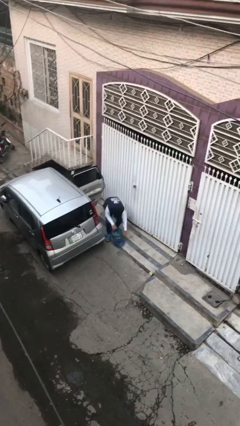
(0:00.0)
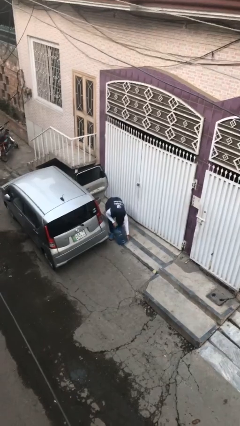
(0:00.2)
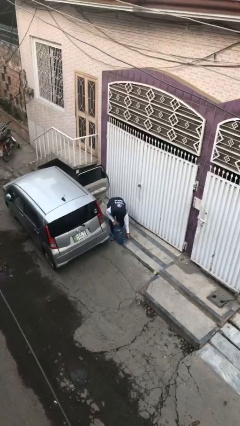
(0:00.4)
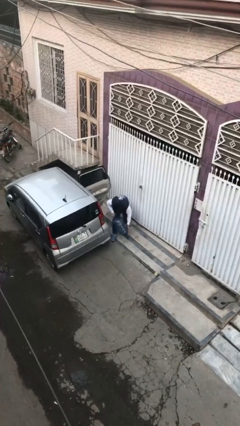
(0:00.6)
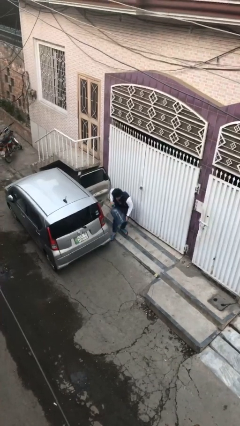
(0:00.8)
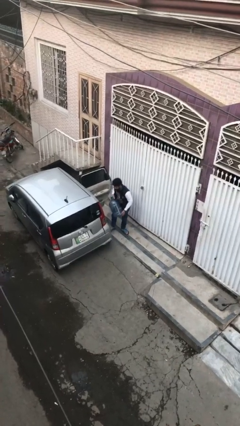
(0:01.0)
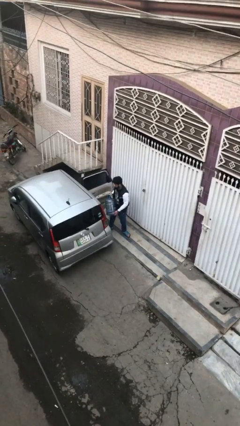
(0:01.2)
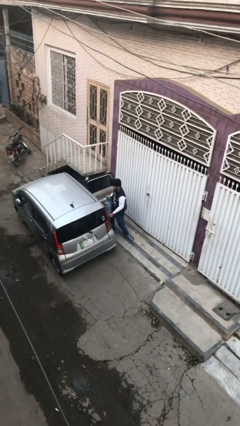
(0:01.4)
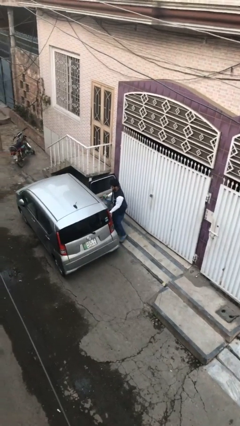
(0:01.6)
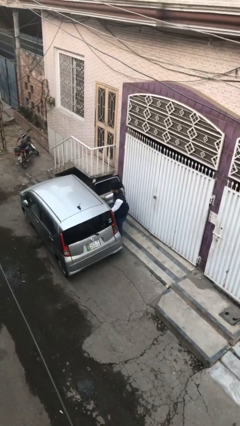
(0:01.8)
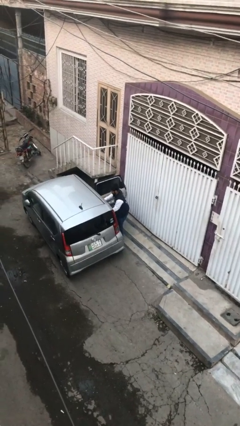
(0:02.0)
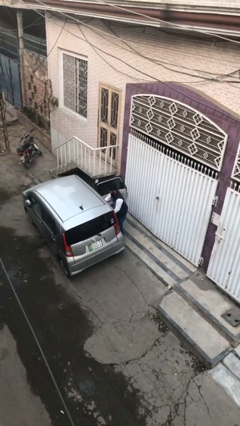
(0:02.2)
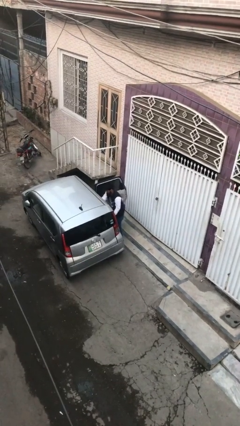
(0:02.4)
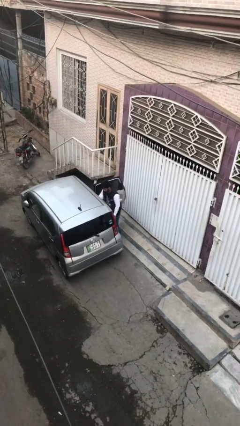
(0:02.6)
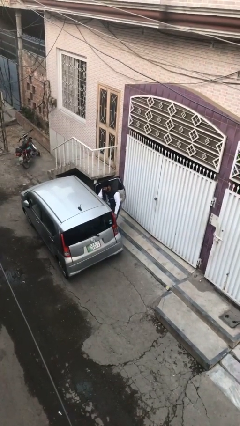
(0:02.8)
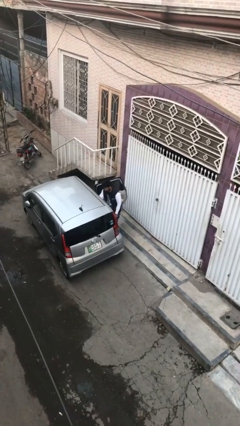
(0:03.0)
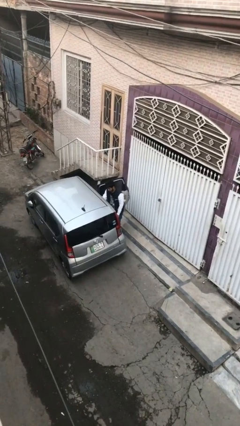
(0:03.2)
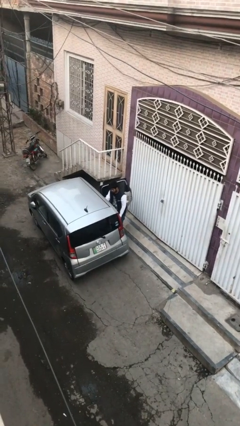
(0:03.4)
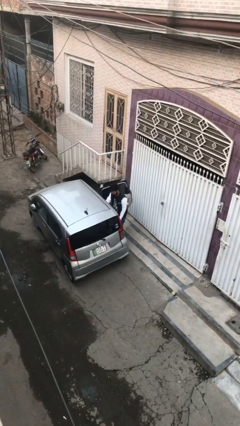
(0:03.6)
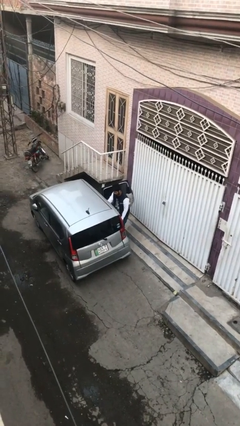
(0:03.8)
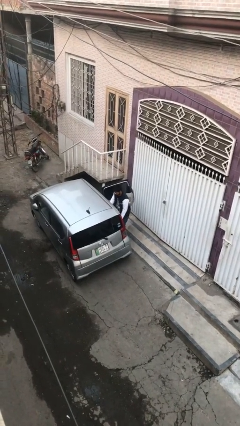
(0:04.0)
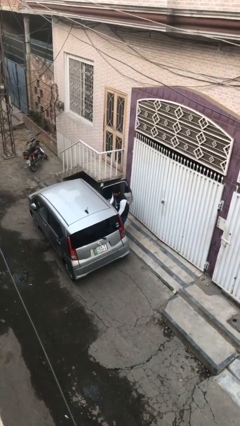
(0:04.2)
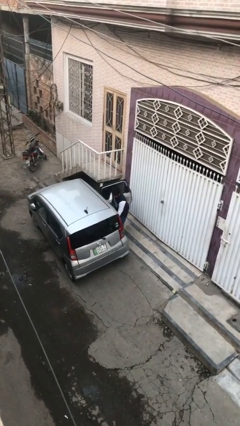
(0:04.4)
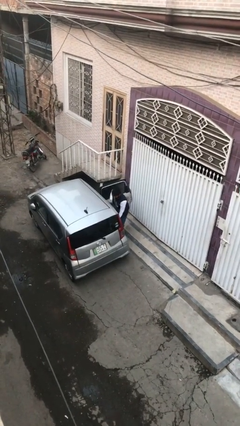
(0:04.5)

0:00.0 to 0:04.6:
person loads car

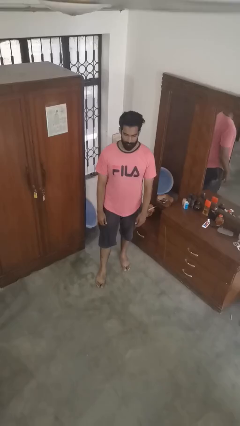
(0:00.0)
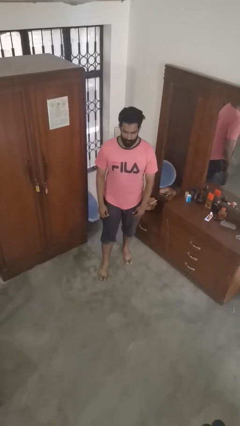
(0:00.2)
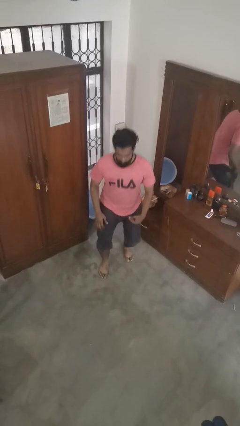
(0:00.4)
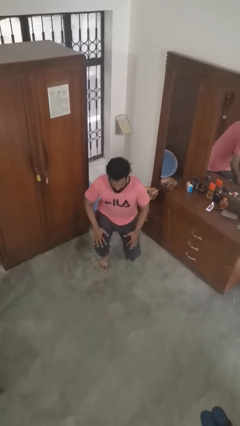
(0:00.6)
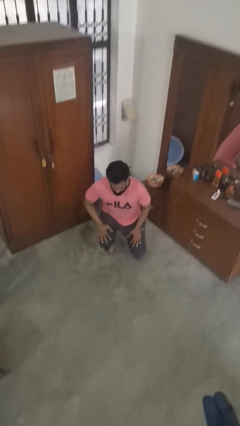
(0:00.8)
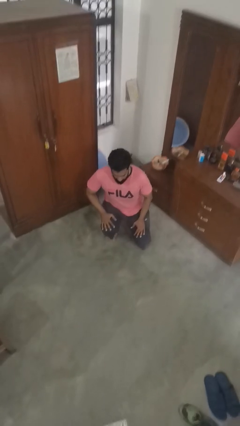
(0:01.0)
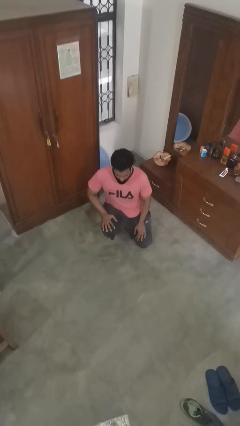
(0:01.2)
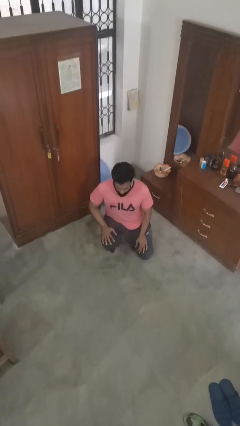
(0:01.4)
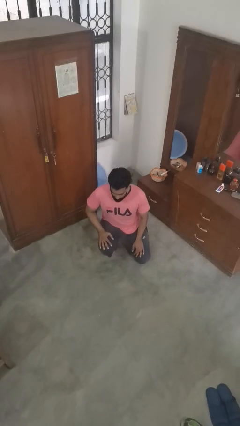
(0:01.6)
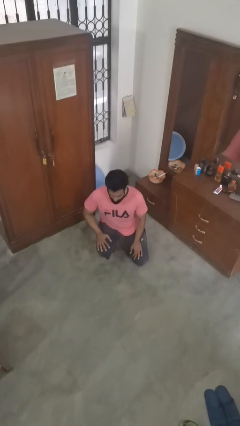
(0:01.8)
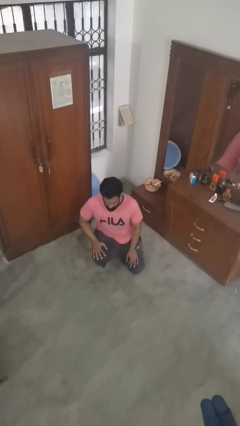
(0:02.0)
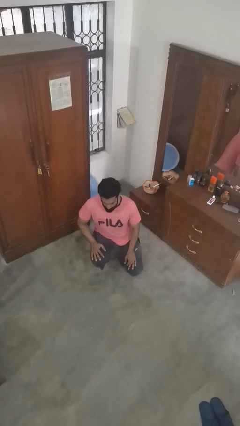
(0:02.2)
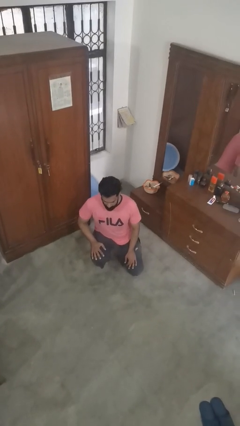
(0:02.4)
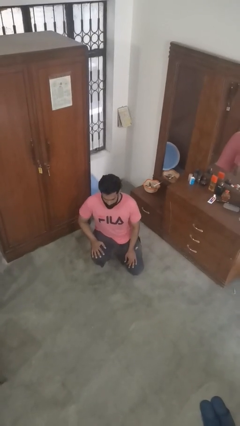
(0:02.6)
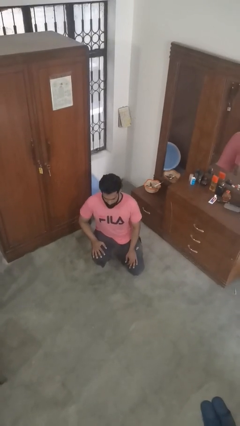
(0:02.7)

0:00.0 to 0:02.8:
person kneels

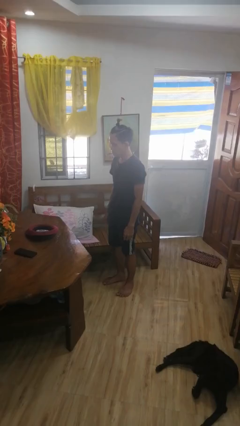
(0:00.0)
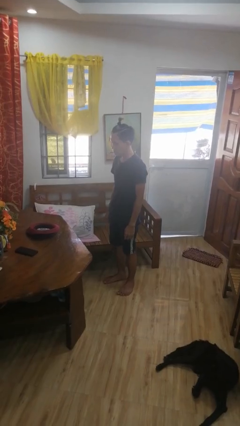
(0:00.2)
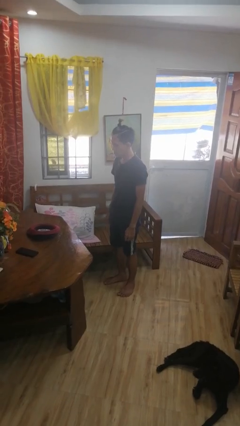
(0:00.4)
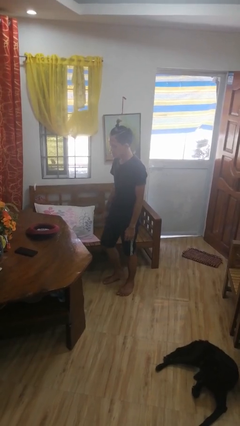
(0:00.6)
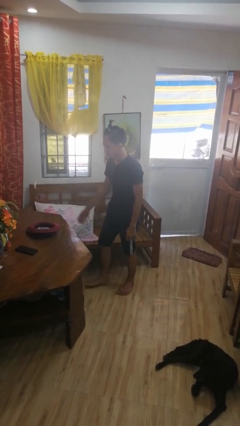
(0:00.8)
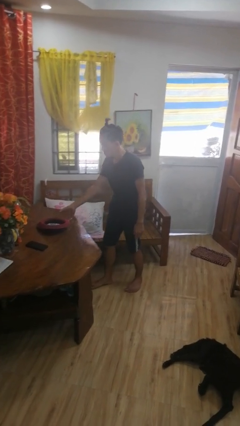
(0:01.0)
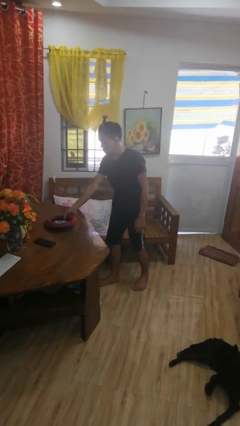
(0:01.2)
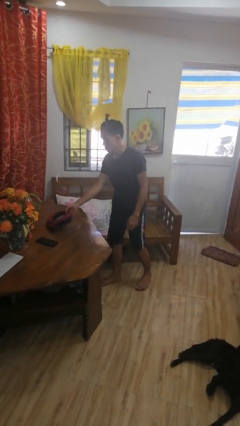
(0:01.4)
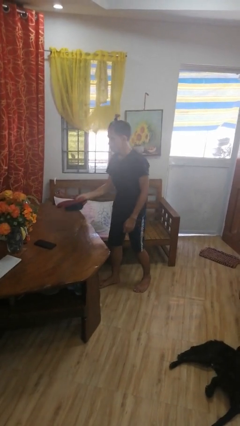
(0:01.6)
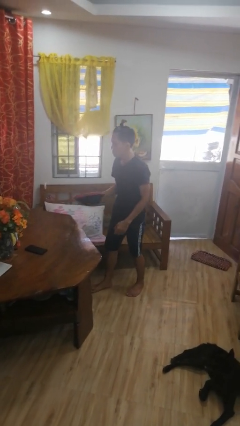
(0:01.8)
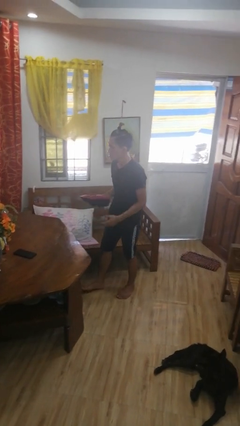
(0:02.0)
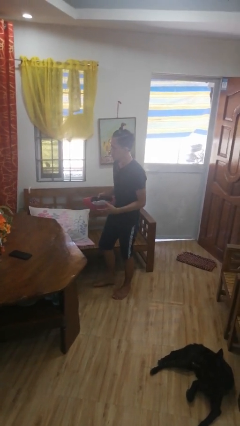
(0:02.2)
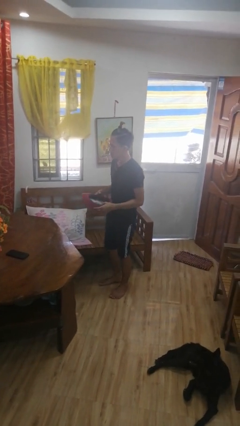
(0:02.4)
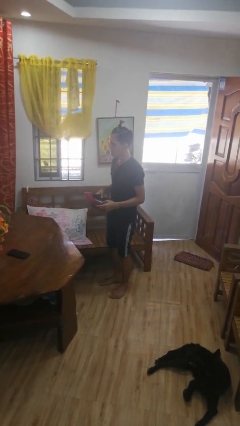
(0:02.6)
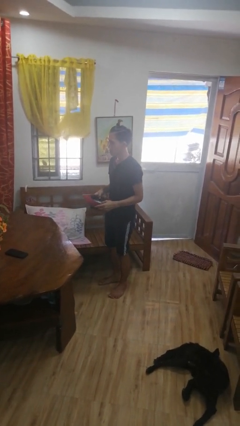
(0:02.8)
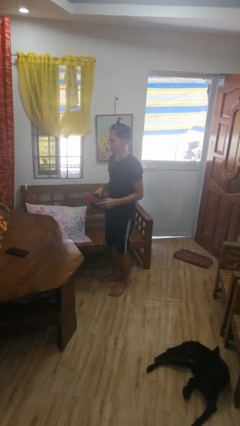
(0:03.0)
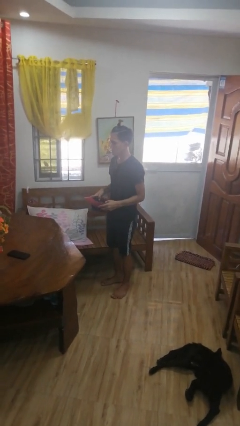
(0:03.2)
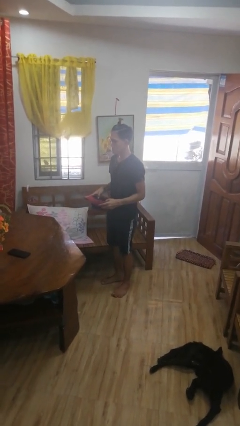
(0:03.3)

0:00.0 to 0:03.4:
person picks up object from table

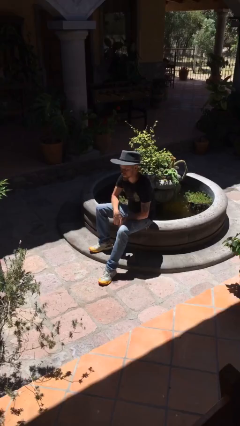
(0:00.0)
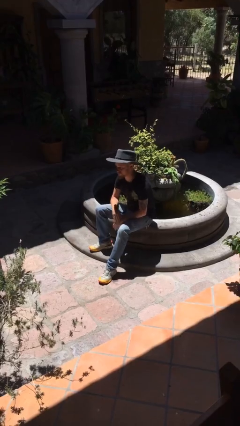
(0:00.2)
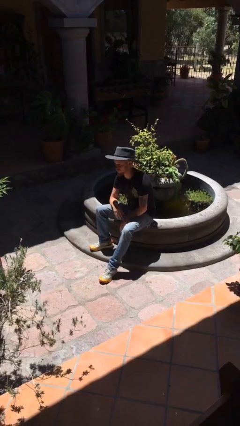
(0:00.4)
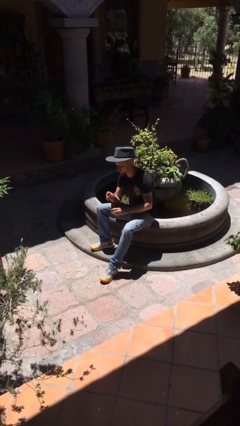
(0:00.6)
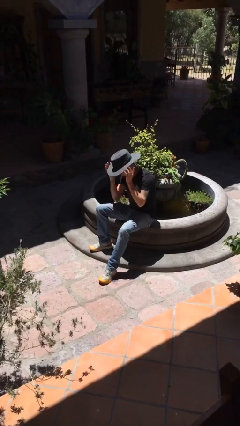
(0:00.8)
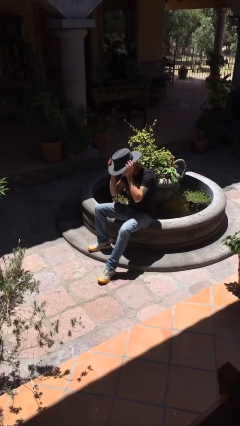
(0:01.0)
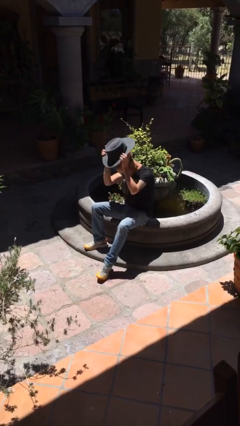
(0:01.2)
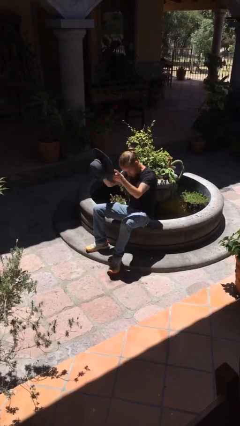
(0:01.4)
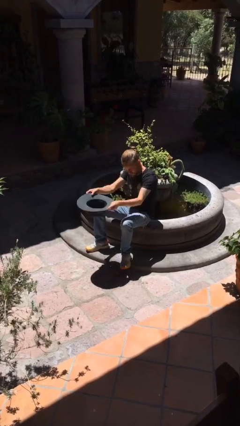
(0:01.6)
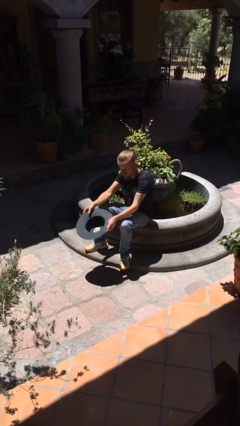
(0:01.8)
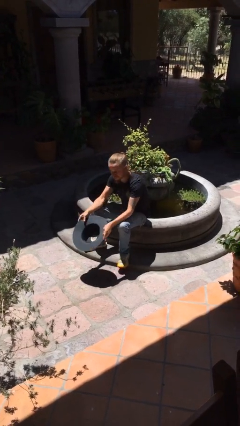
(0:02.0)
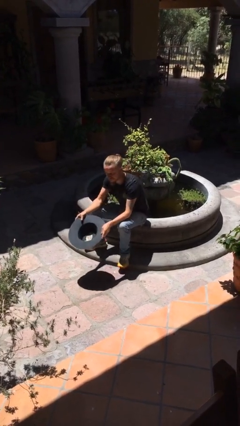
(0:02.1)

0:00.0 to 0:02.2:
person takes off hat

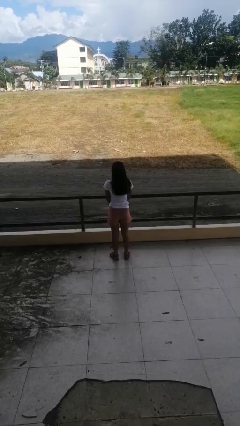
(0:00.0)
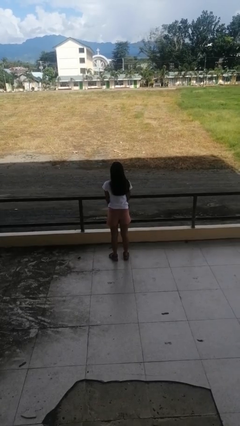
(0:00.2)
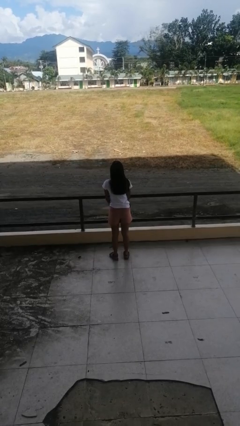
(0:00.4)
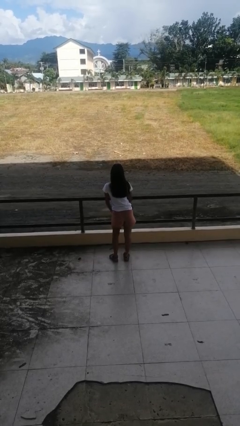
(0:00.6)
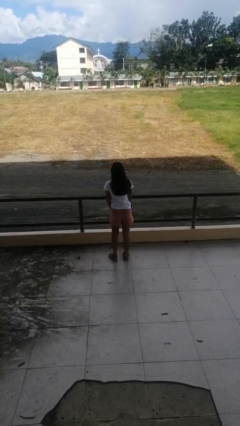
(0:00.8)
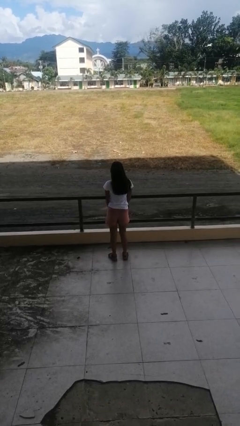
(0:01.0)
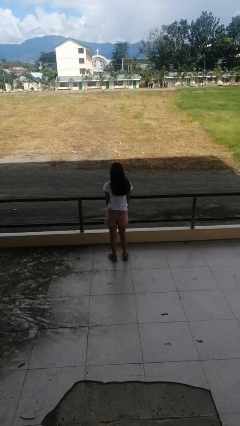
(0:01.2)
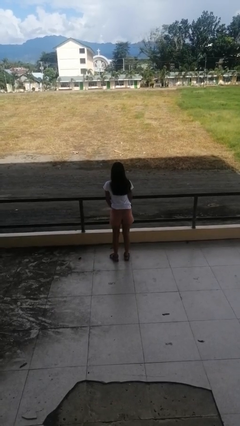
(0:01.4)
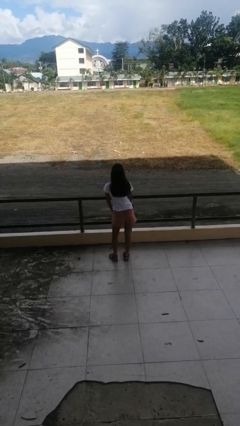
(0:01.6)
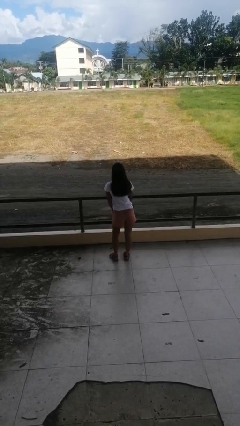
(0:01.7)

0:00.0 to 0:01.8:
person wiggles hips

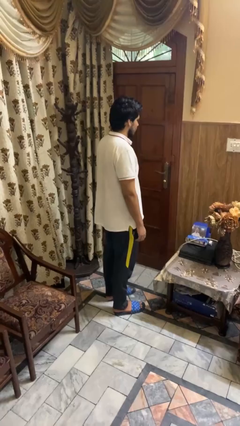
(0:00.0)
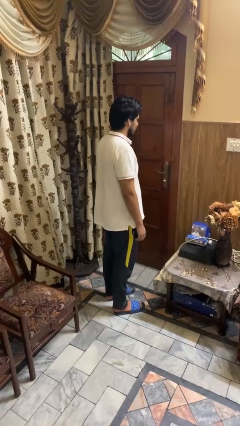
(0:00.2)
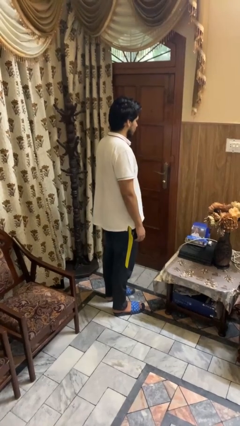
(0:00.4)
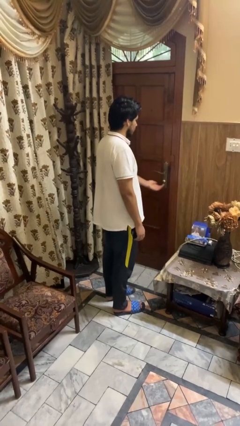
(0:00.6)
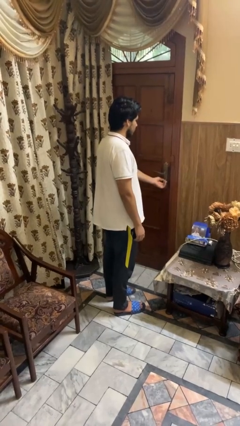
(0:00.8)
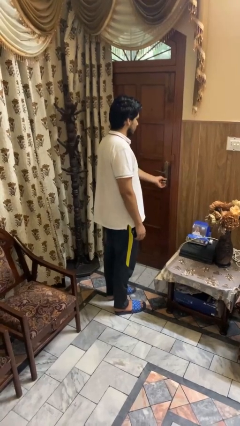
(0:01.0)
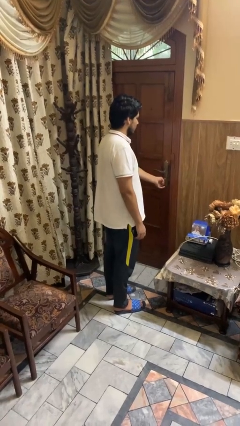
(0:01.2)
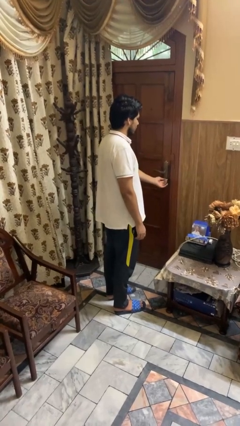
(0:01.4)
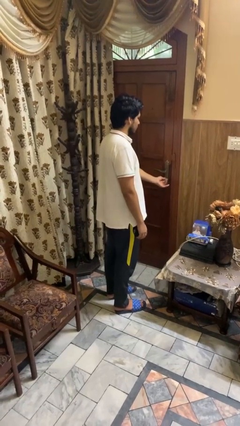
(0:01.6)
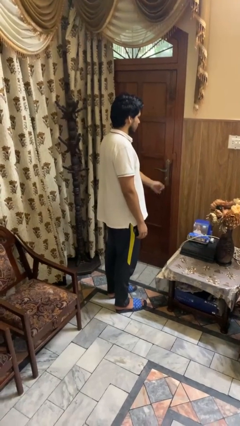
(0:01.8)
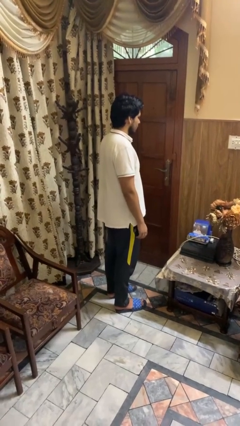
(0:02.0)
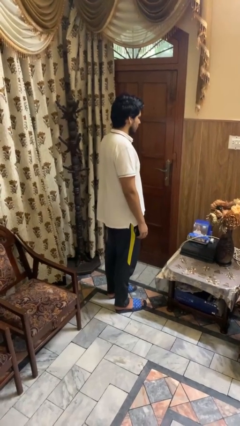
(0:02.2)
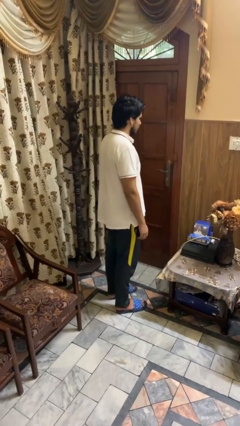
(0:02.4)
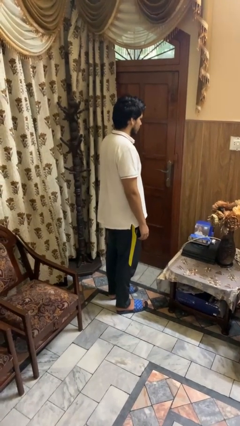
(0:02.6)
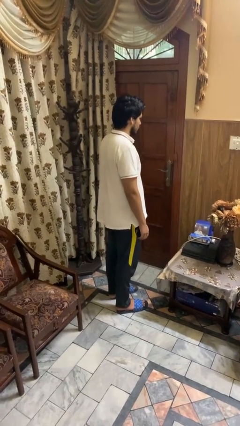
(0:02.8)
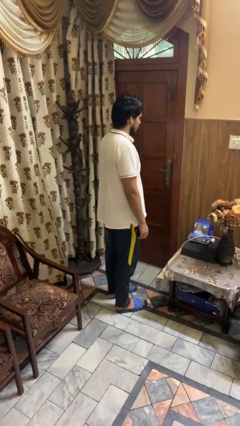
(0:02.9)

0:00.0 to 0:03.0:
person locks door with keys
